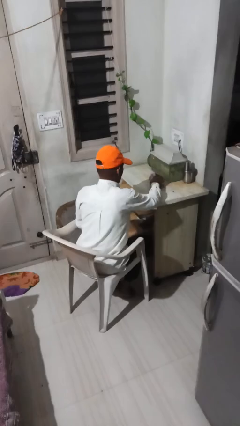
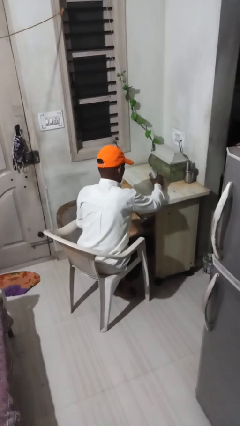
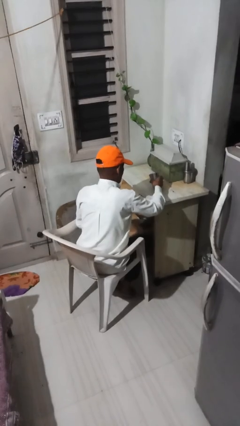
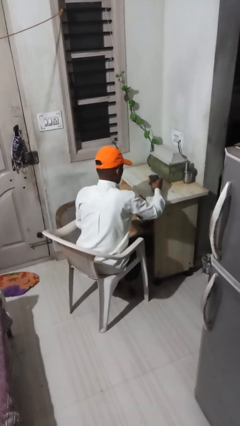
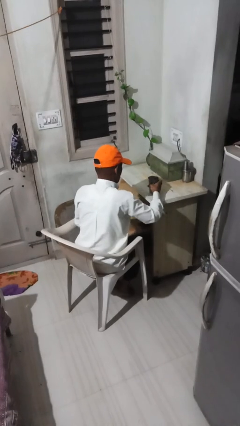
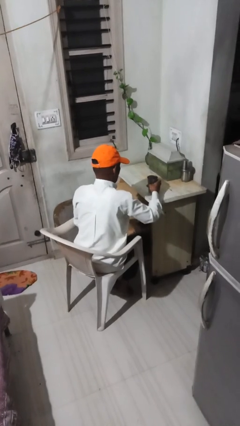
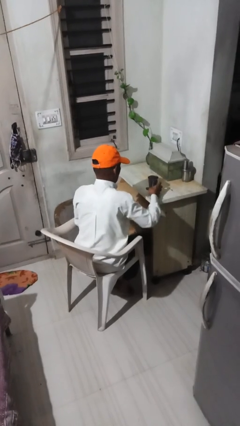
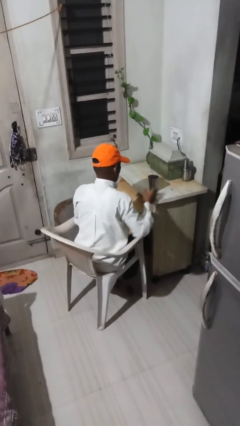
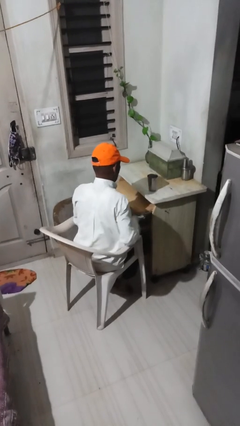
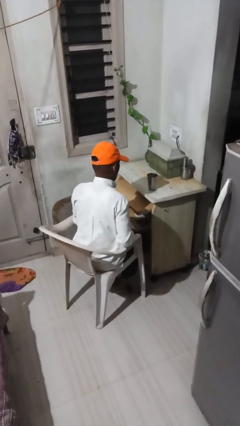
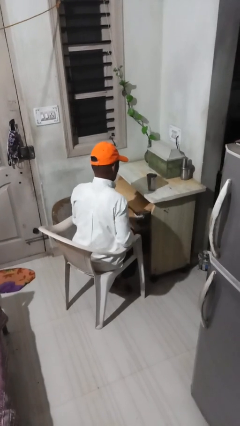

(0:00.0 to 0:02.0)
person sets upright glass

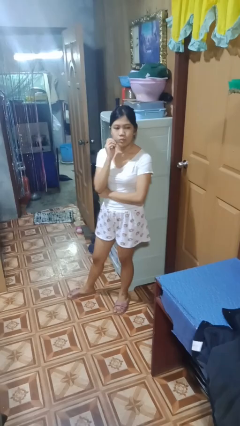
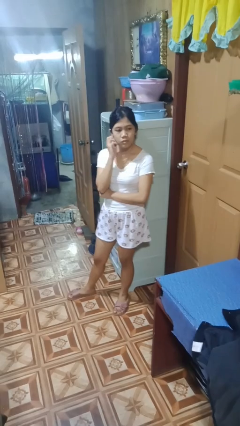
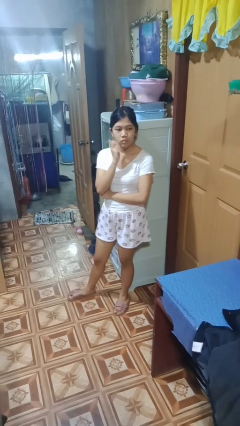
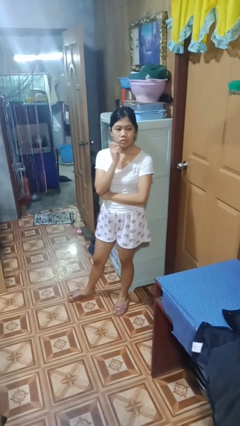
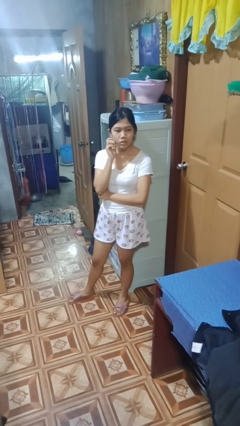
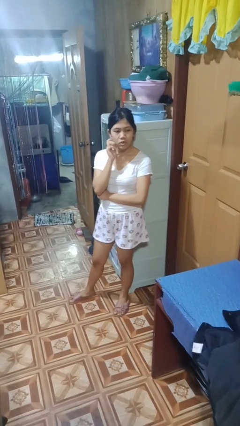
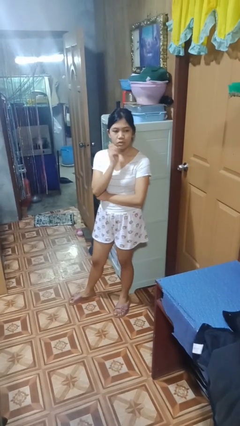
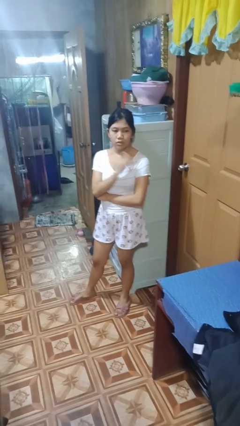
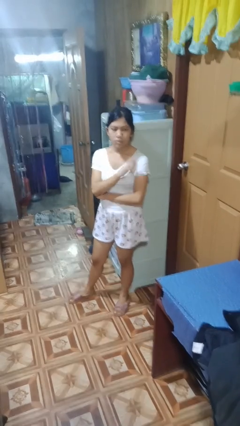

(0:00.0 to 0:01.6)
person strokes chin

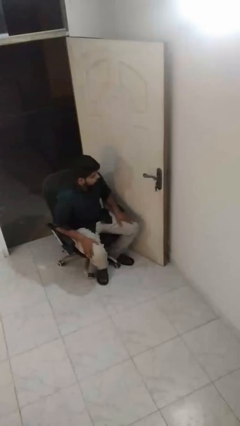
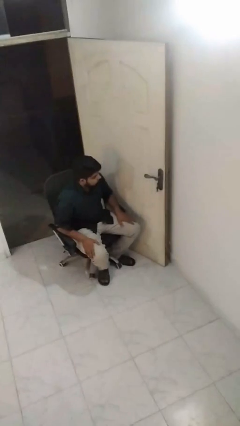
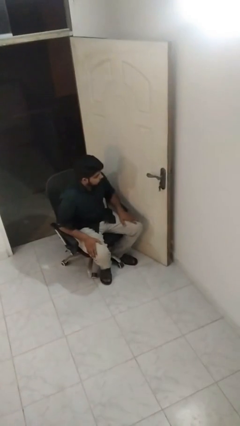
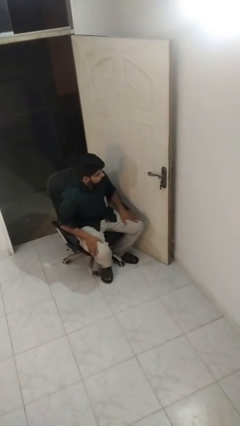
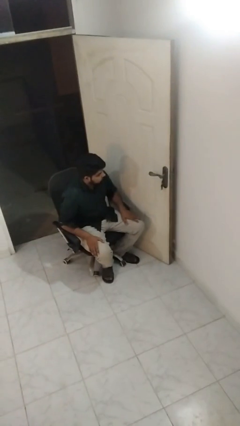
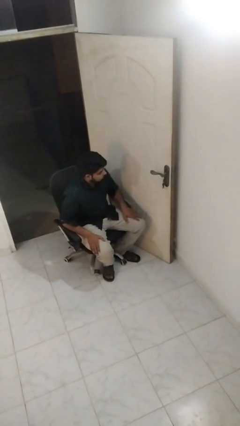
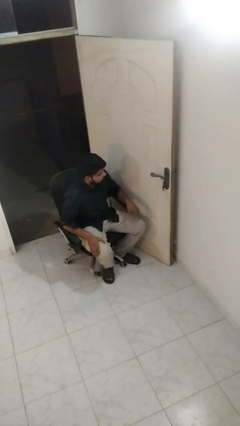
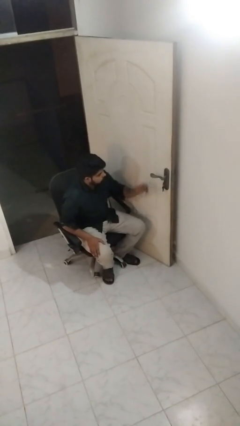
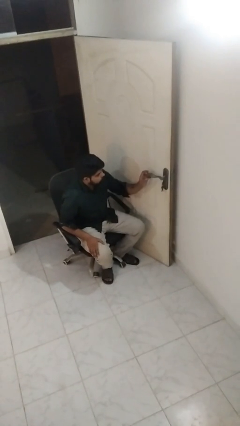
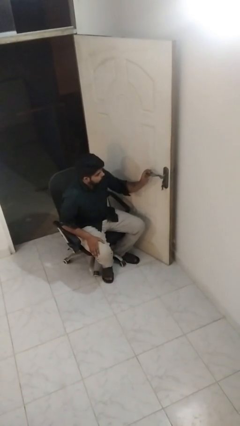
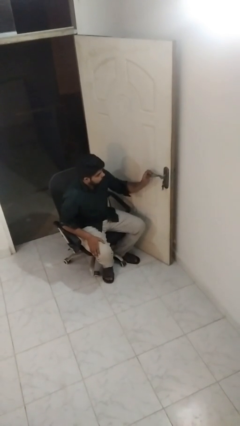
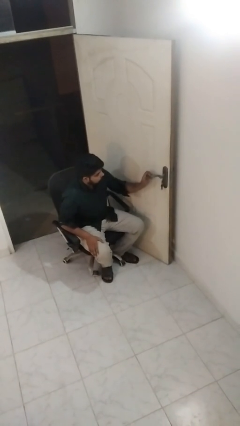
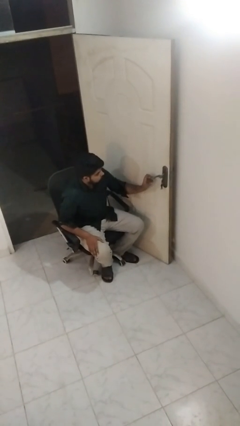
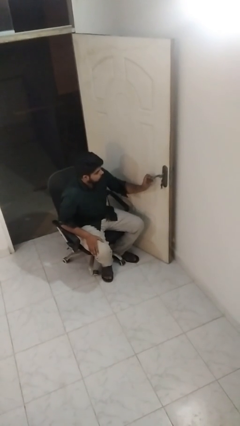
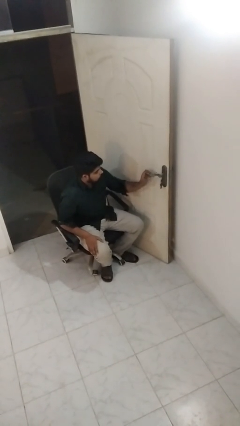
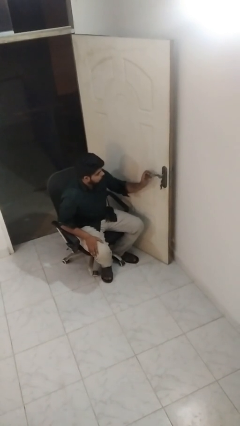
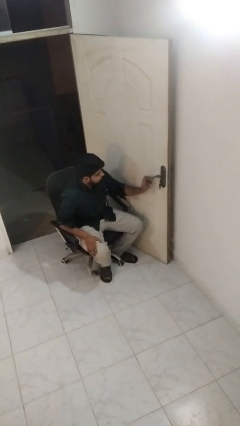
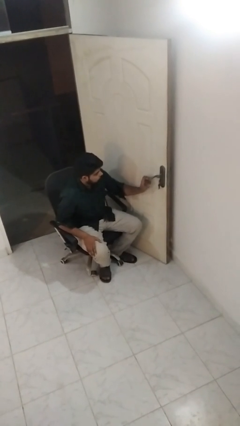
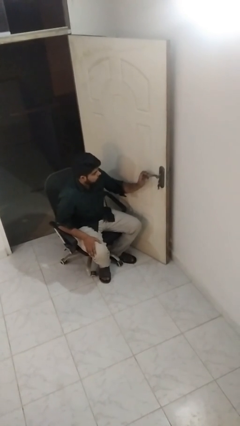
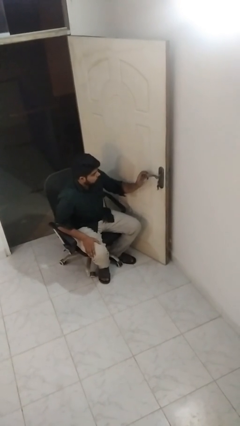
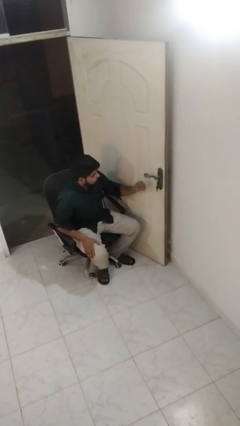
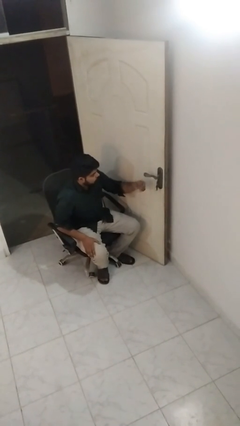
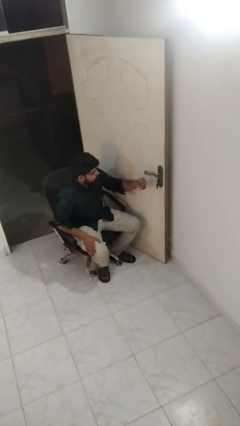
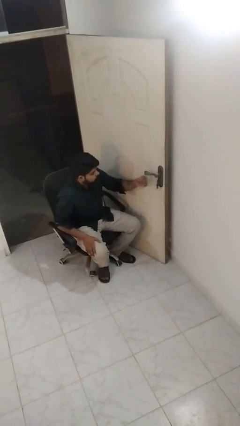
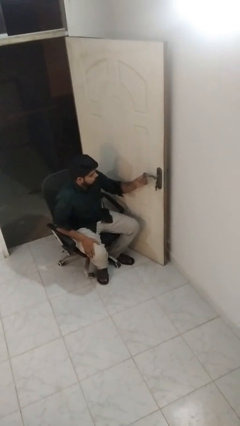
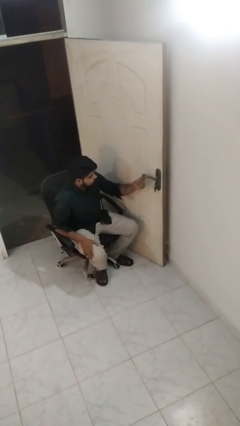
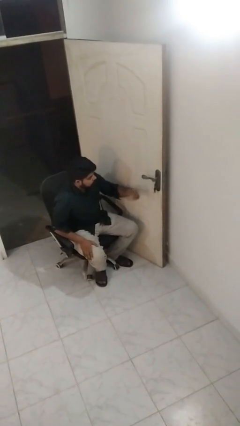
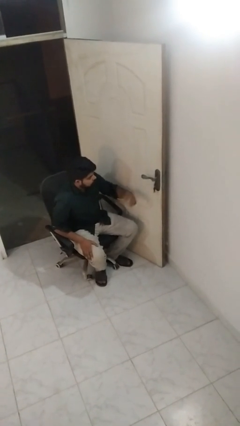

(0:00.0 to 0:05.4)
person taps object with finger

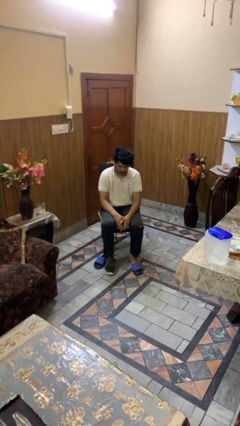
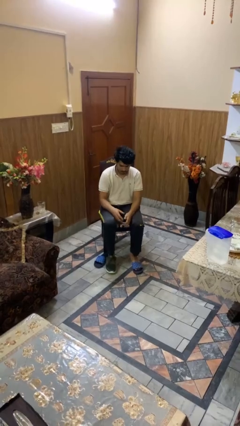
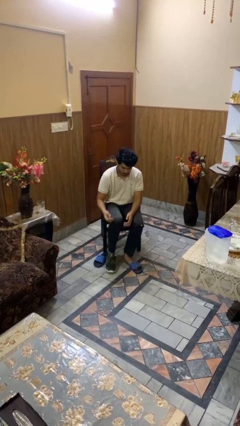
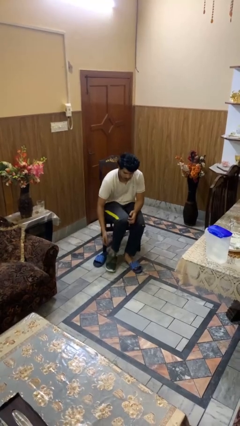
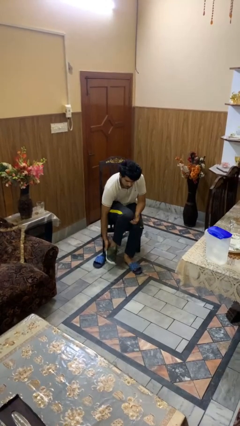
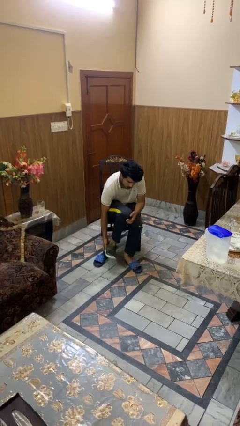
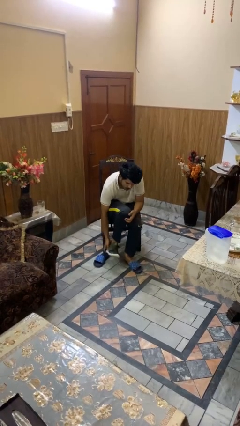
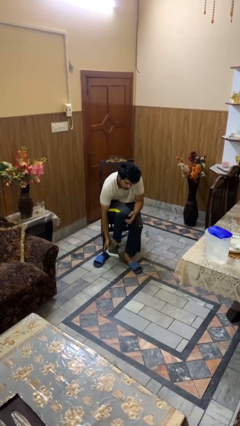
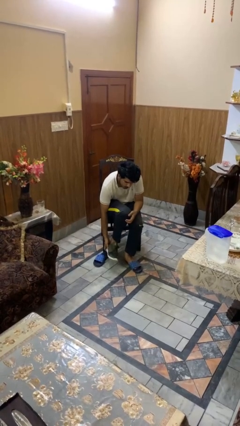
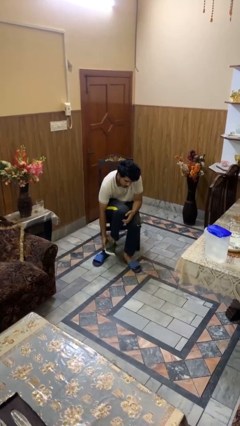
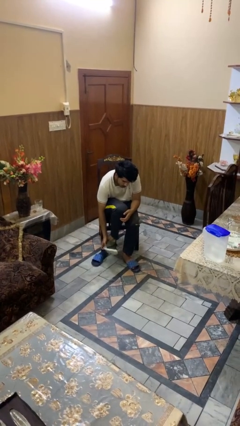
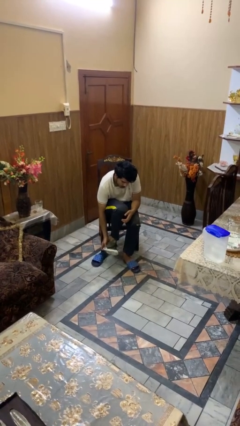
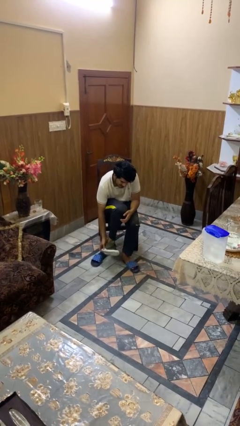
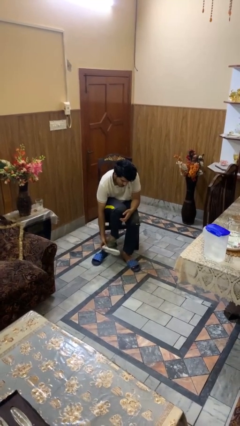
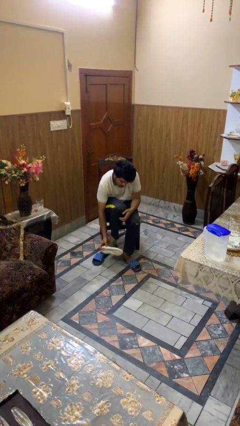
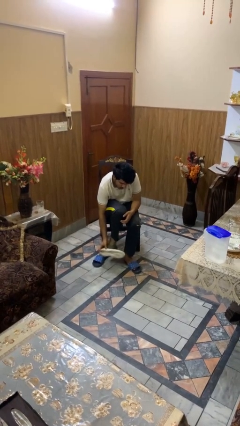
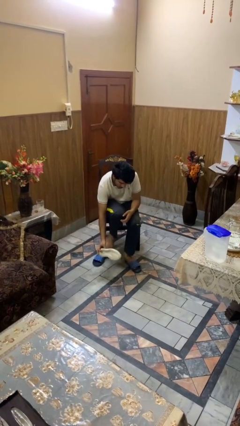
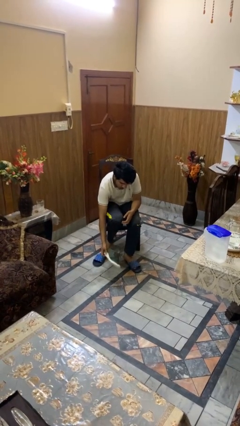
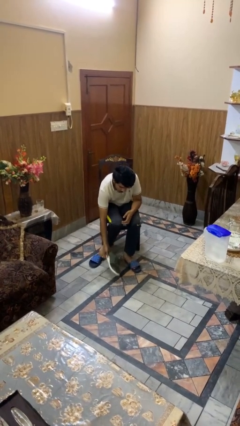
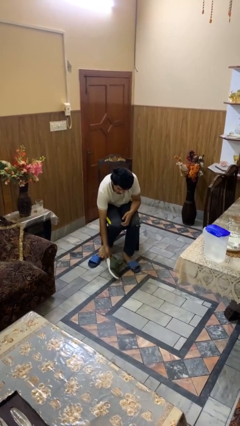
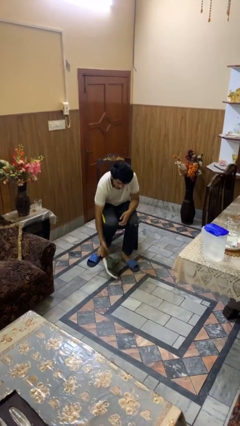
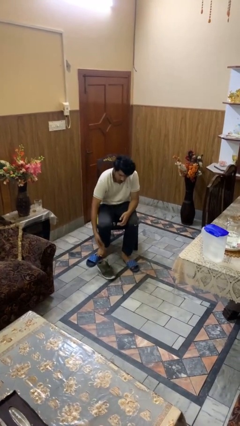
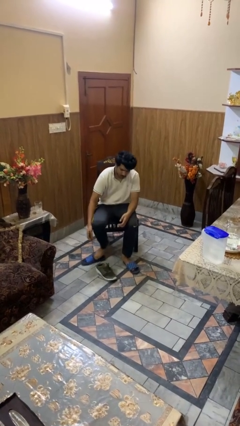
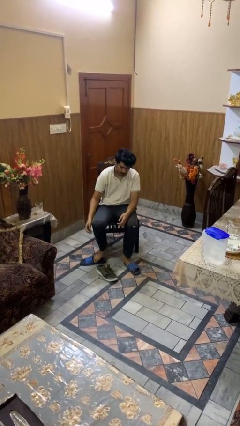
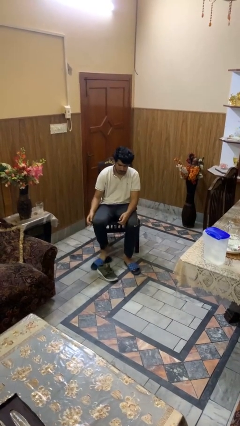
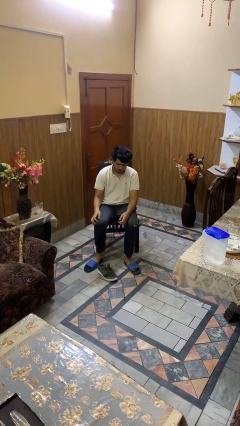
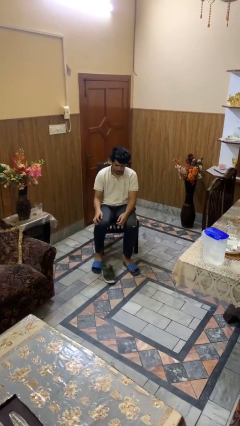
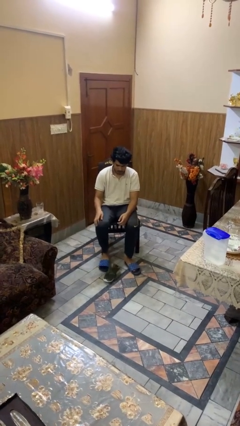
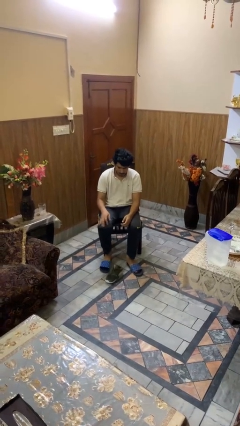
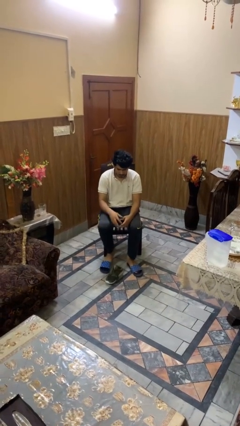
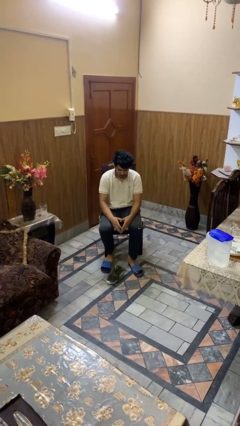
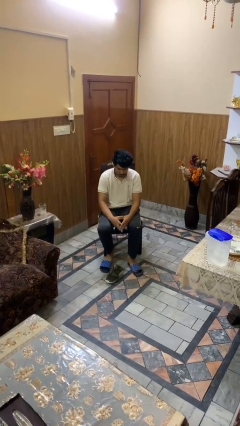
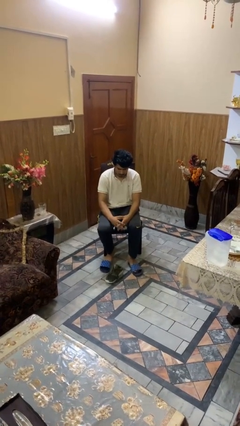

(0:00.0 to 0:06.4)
person takes off boots

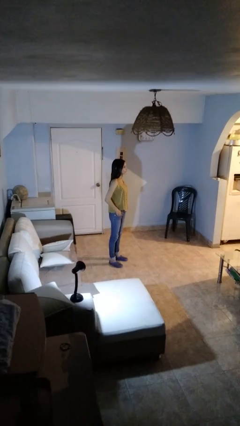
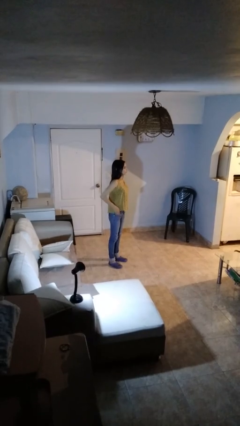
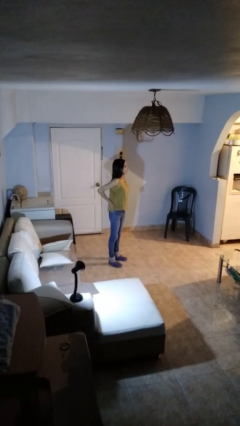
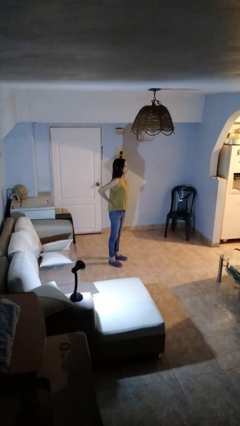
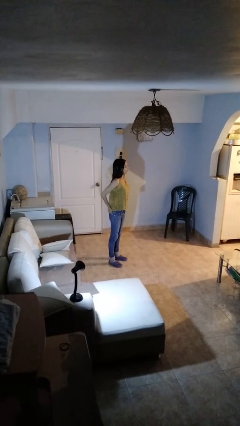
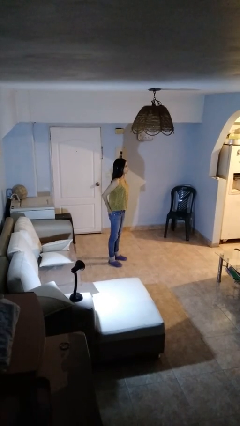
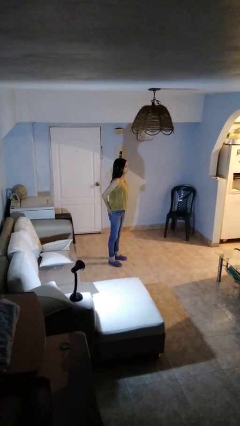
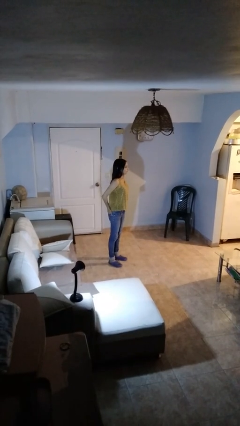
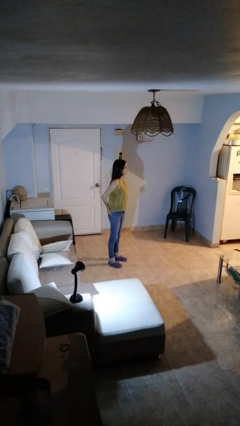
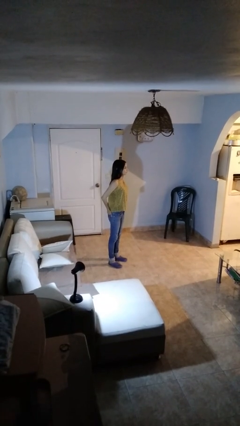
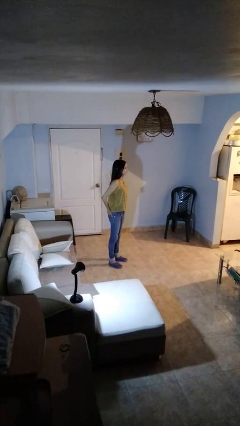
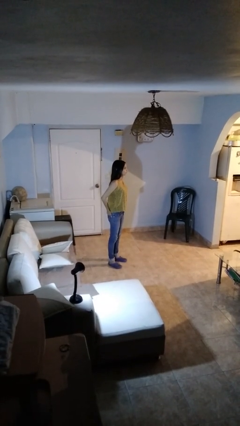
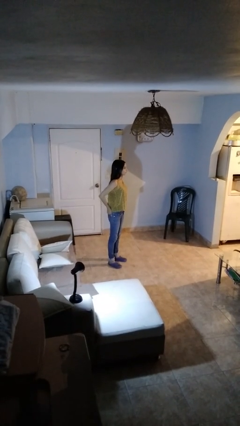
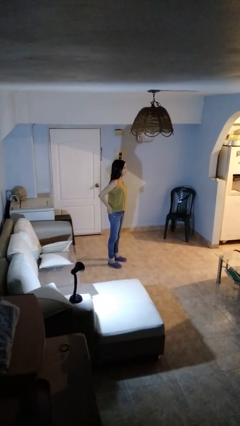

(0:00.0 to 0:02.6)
person puts hands in back pockets
